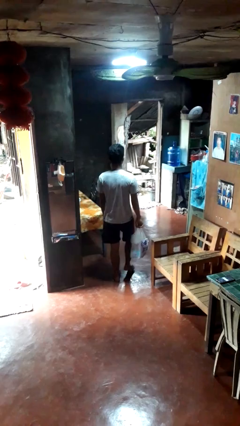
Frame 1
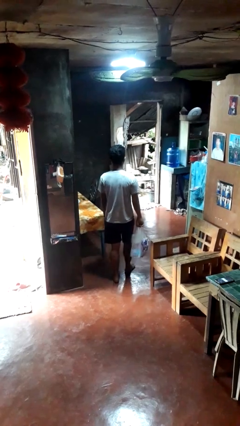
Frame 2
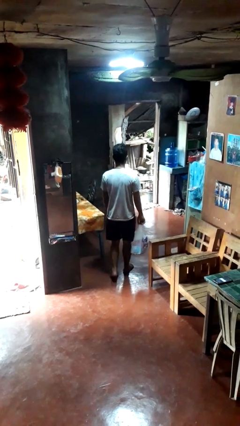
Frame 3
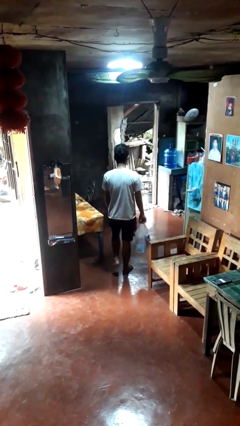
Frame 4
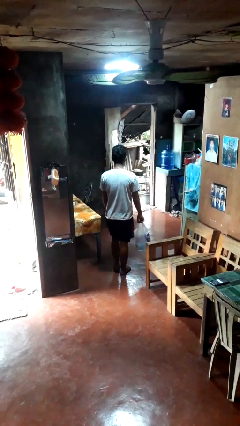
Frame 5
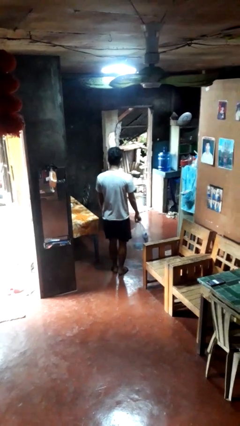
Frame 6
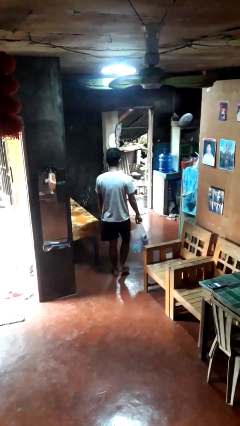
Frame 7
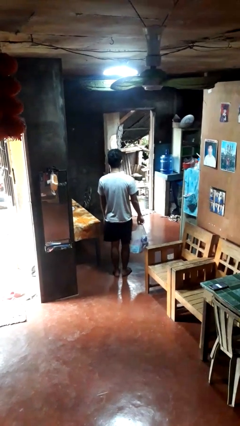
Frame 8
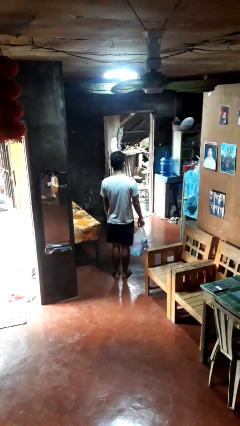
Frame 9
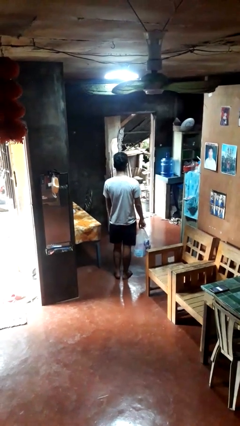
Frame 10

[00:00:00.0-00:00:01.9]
person carries groceries

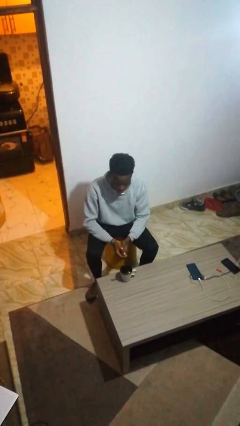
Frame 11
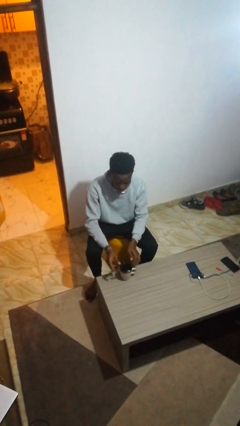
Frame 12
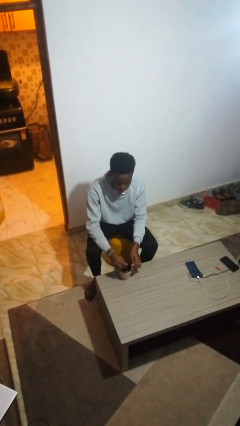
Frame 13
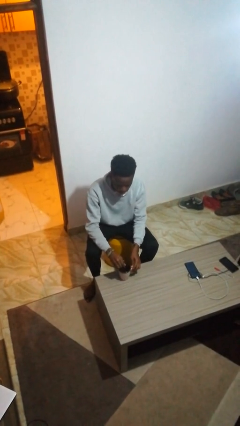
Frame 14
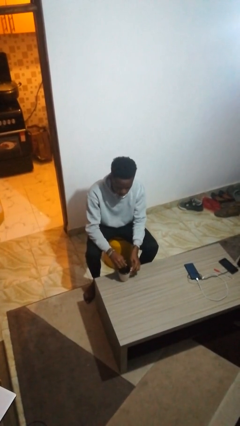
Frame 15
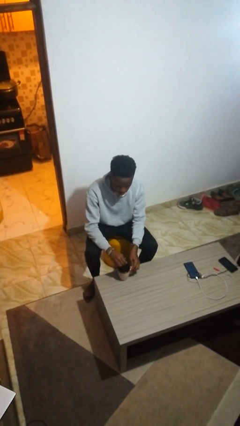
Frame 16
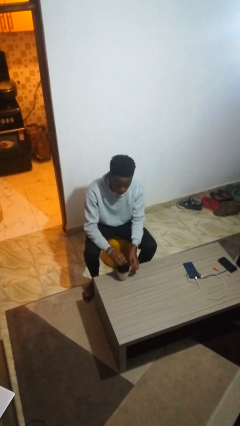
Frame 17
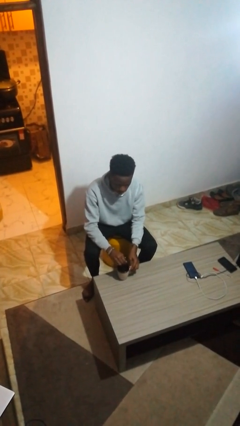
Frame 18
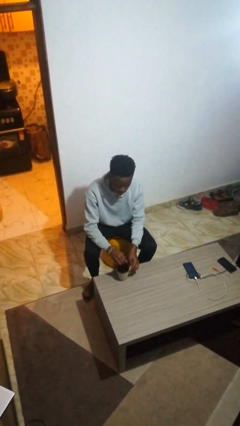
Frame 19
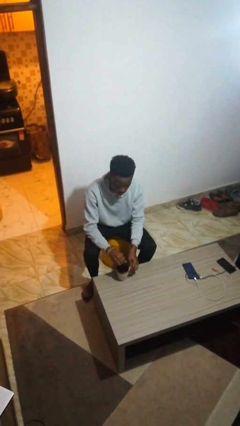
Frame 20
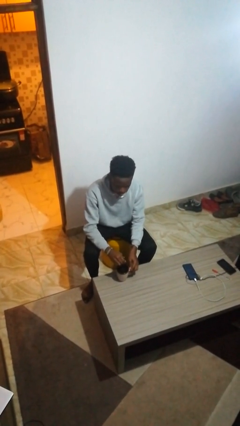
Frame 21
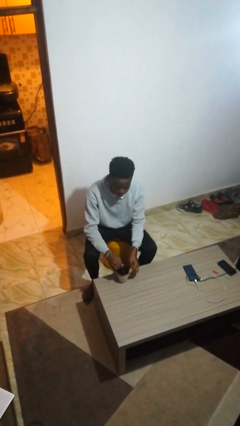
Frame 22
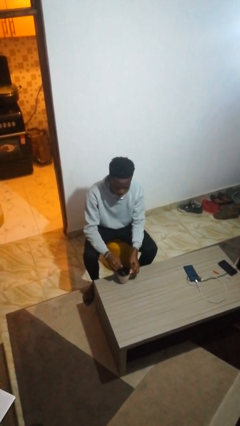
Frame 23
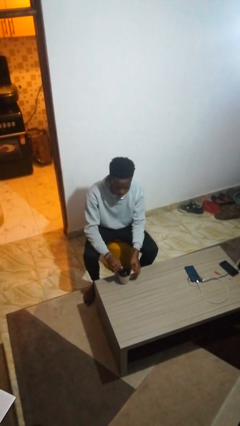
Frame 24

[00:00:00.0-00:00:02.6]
person stirs mug

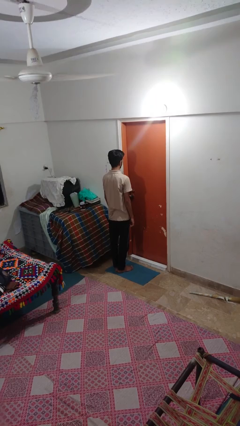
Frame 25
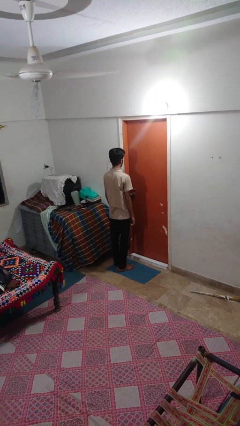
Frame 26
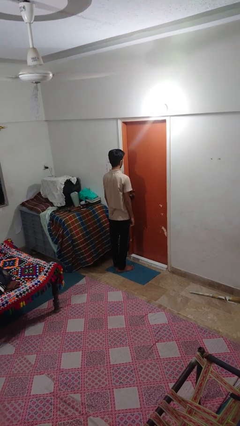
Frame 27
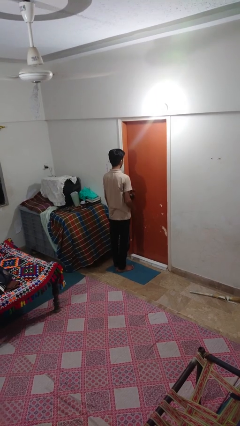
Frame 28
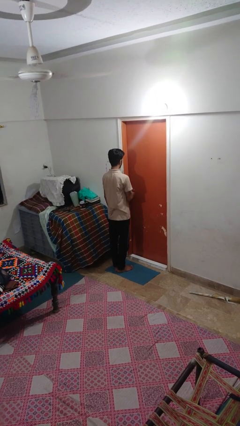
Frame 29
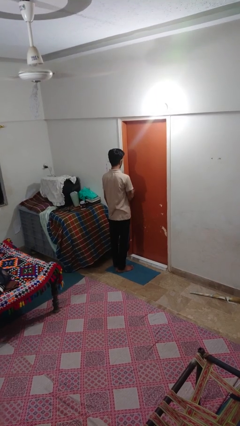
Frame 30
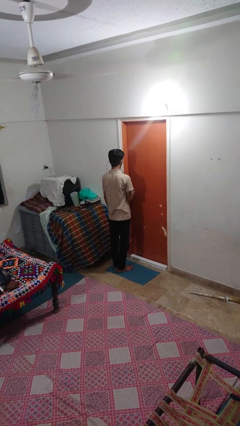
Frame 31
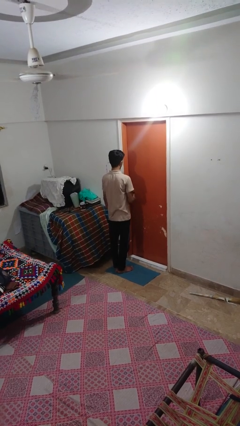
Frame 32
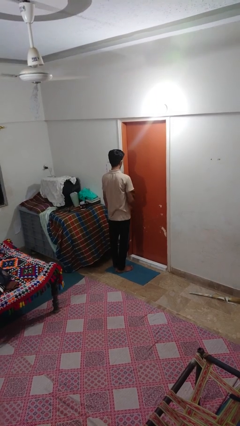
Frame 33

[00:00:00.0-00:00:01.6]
person unlocks door with keys

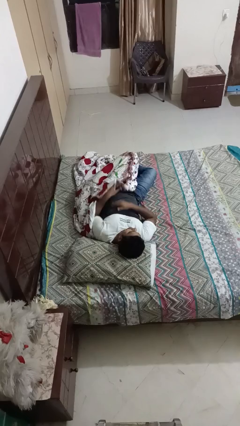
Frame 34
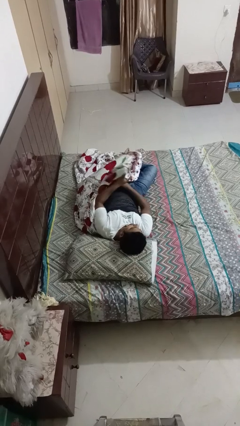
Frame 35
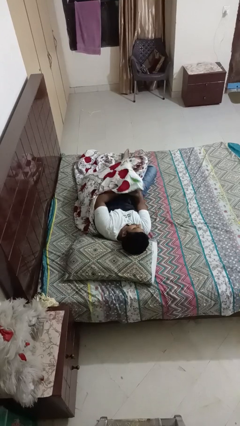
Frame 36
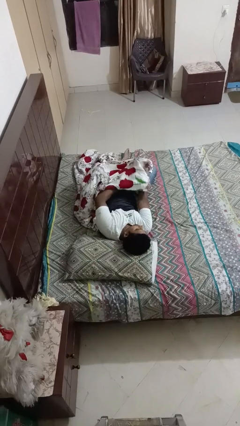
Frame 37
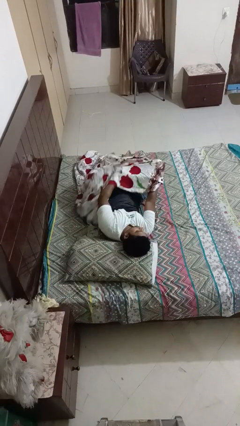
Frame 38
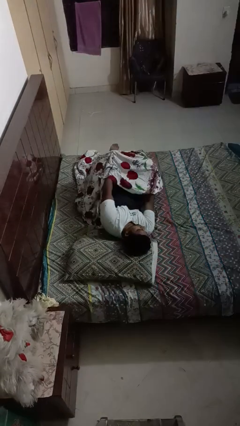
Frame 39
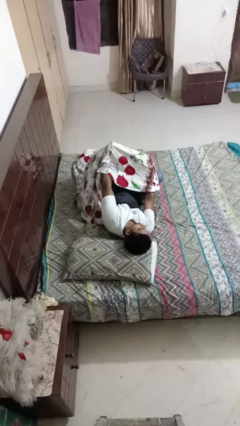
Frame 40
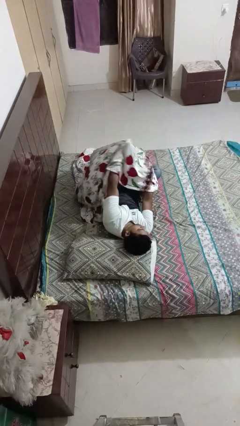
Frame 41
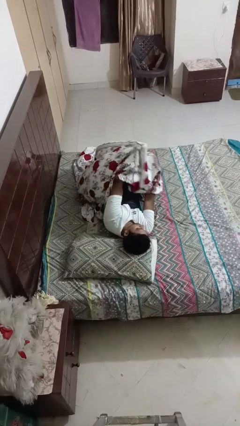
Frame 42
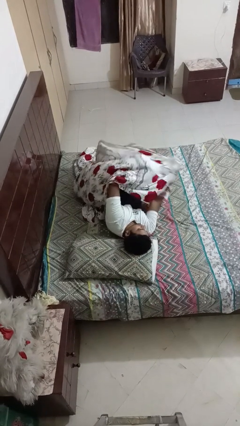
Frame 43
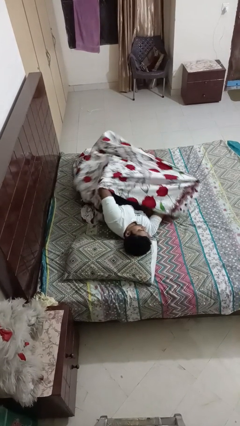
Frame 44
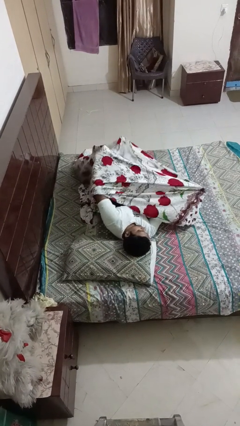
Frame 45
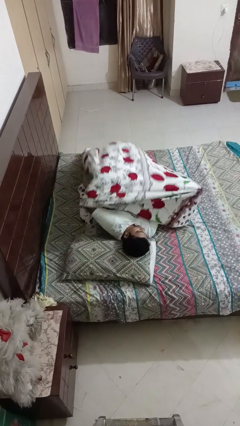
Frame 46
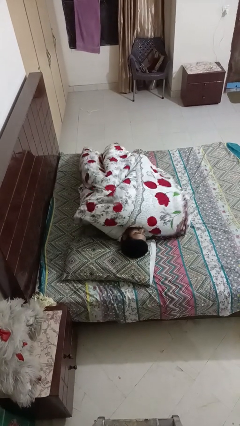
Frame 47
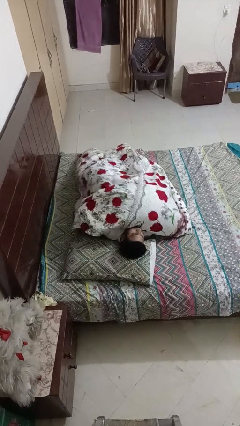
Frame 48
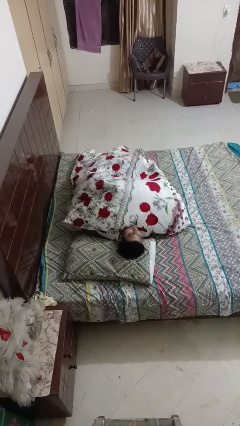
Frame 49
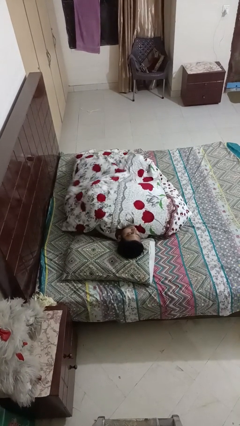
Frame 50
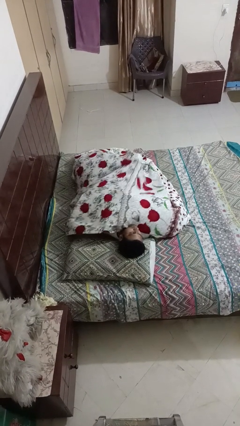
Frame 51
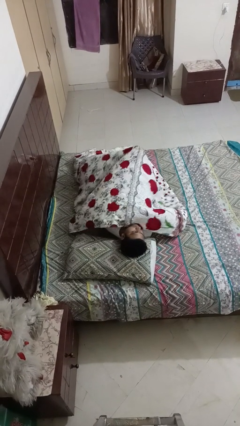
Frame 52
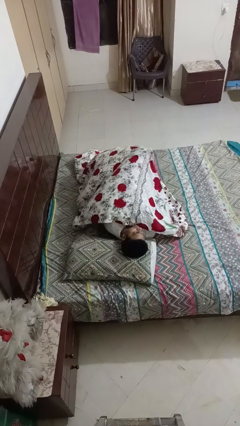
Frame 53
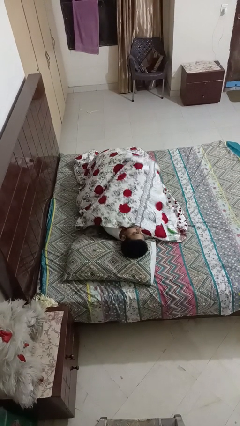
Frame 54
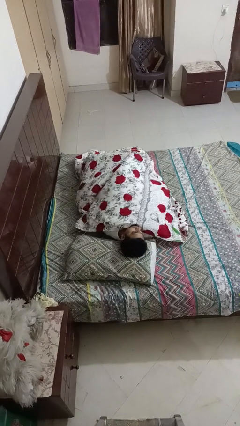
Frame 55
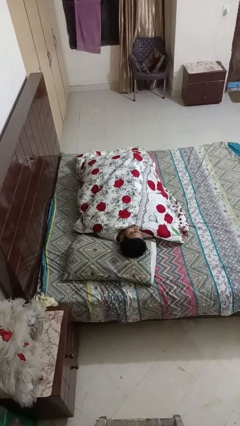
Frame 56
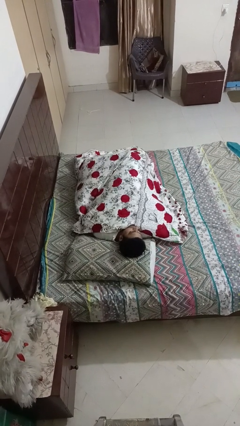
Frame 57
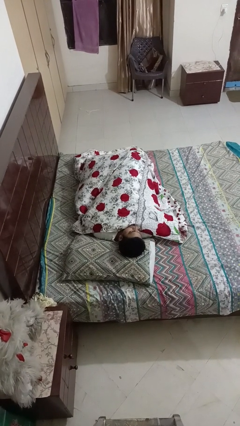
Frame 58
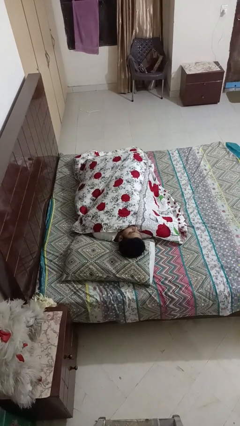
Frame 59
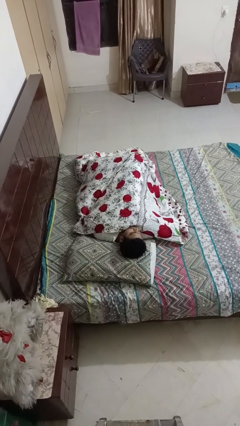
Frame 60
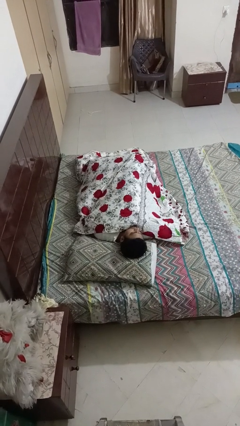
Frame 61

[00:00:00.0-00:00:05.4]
person covers with bedsheets

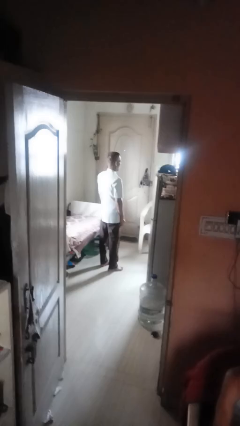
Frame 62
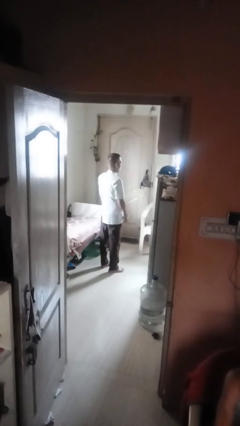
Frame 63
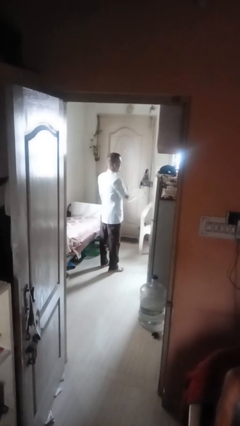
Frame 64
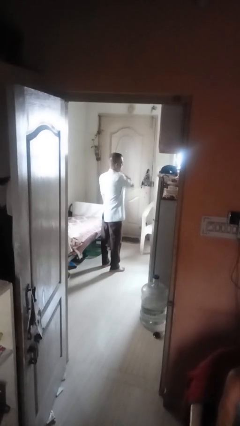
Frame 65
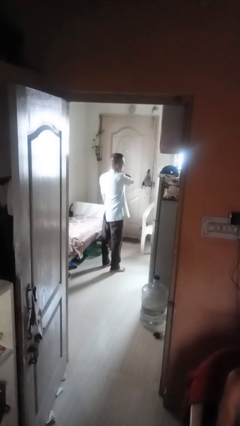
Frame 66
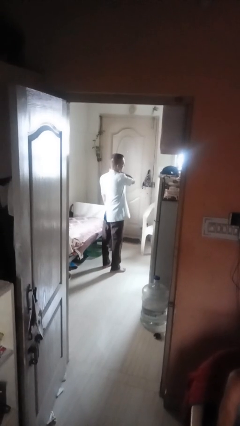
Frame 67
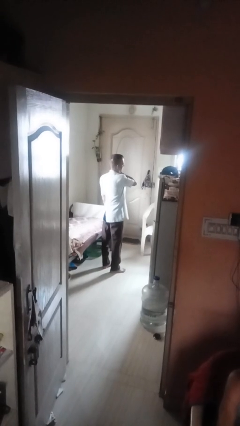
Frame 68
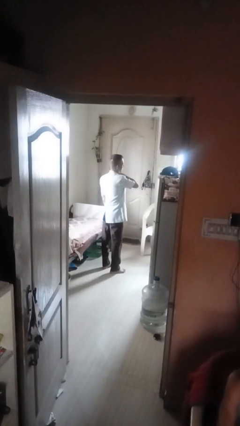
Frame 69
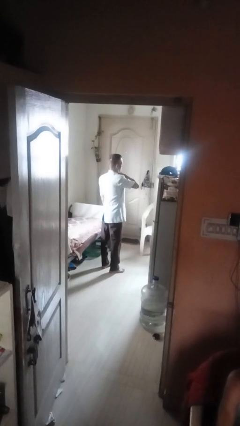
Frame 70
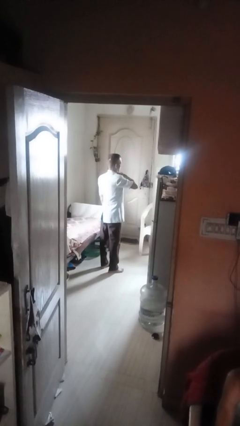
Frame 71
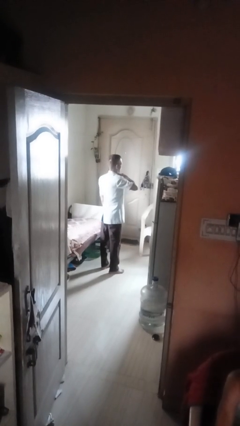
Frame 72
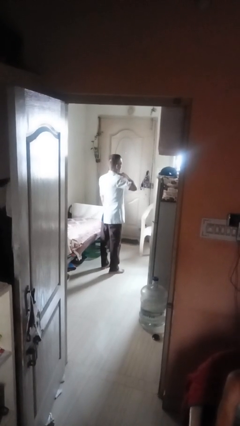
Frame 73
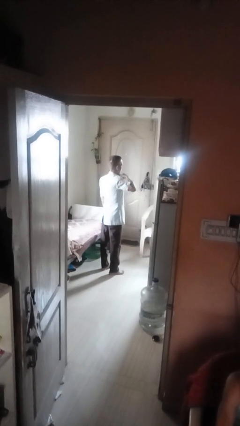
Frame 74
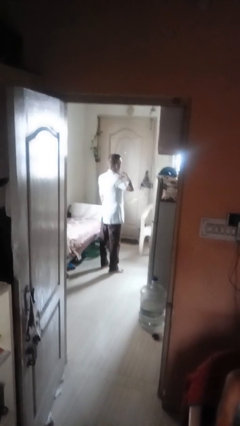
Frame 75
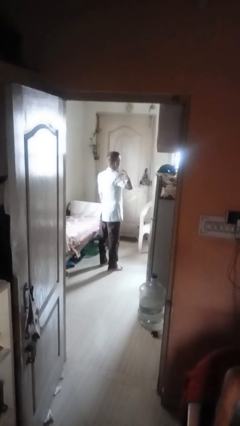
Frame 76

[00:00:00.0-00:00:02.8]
person gestures cut

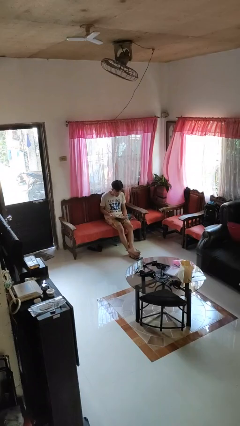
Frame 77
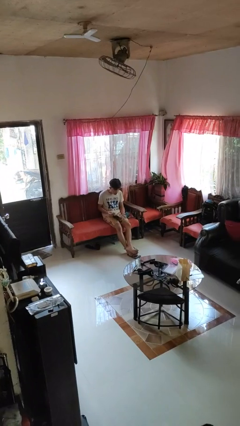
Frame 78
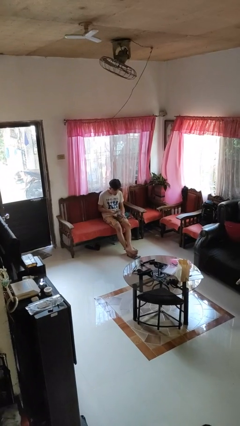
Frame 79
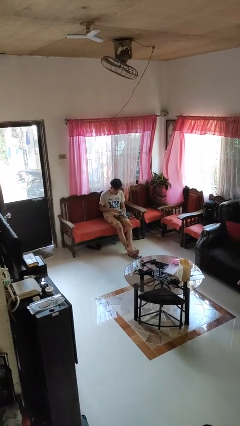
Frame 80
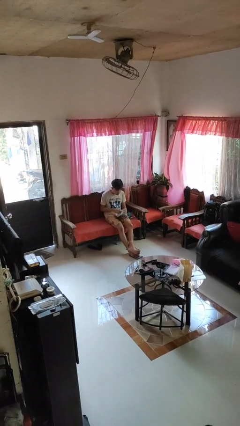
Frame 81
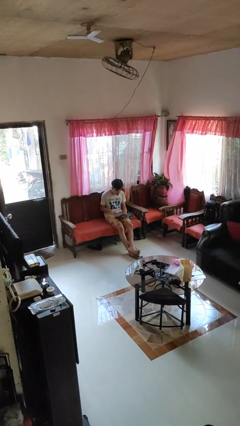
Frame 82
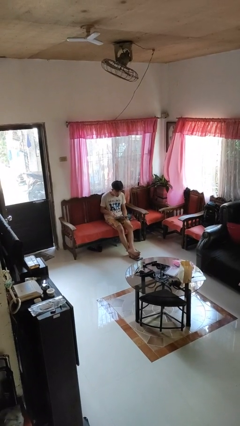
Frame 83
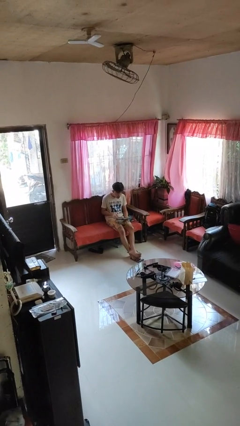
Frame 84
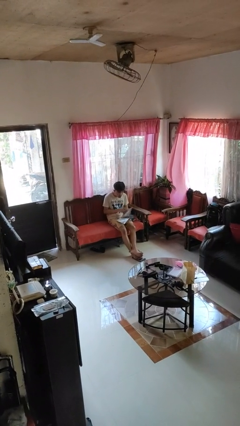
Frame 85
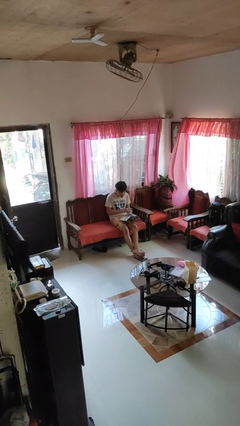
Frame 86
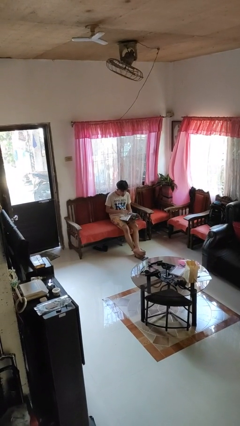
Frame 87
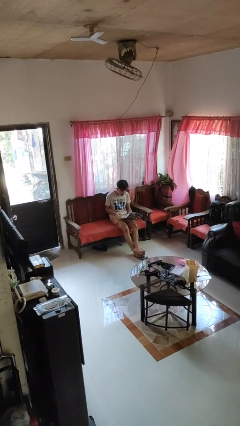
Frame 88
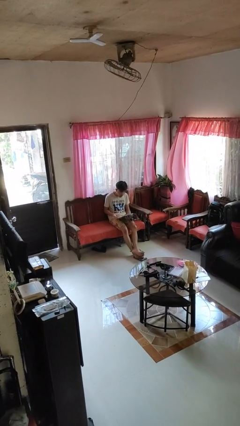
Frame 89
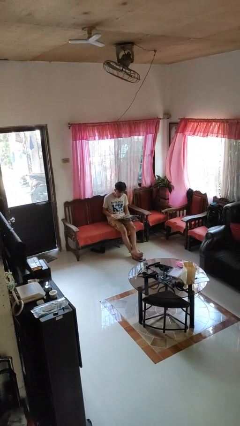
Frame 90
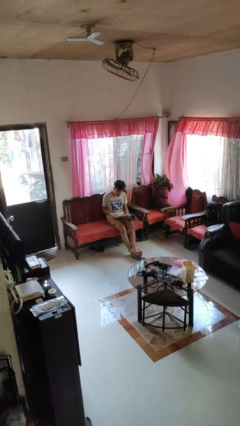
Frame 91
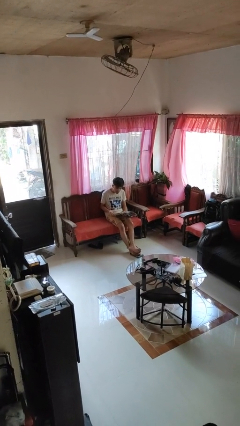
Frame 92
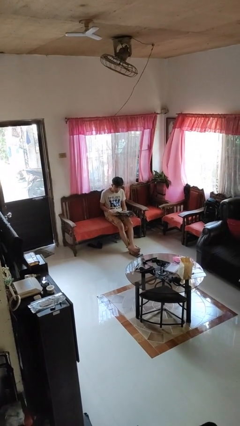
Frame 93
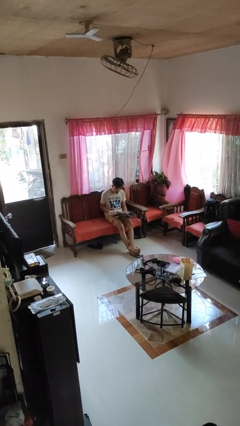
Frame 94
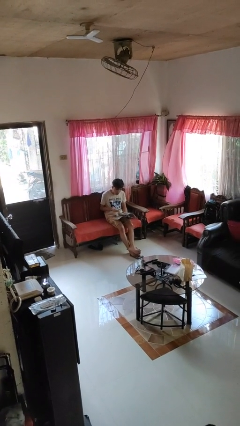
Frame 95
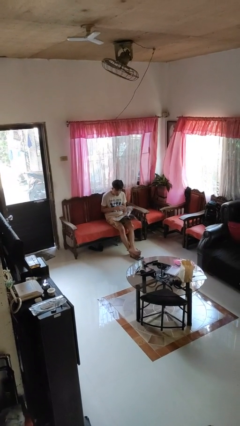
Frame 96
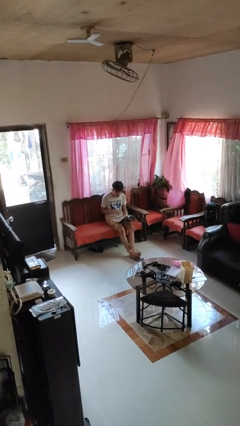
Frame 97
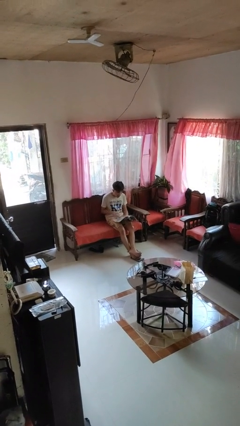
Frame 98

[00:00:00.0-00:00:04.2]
person reads magazine
